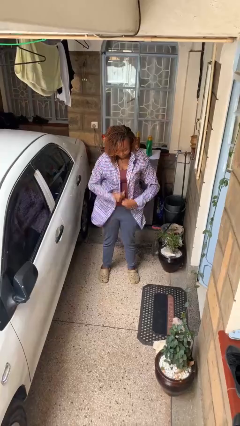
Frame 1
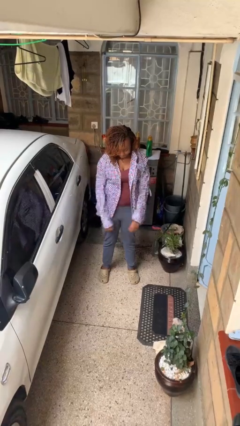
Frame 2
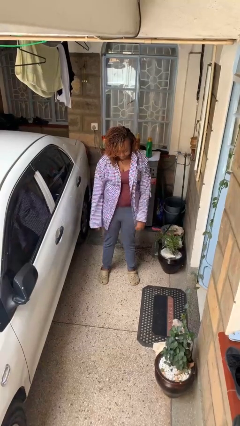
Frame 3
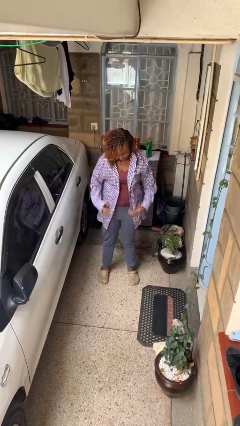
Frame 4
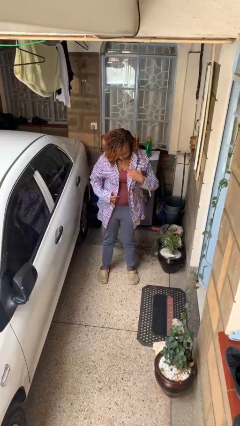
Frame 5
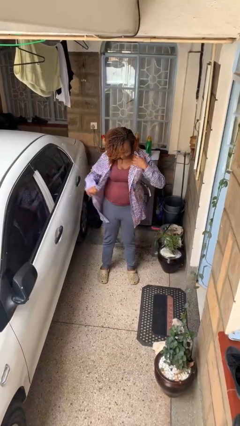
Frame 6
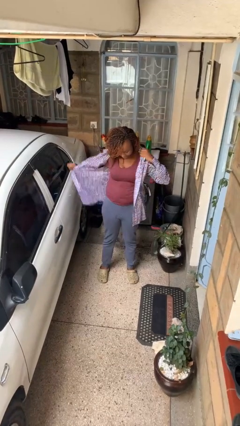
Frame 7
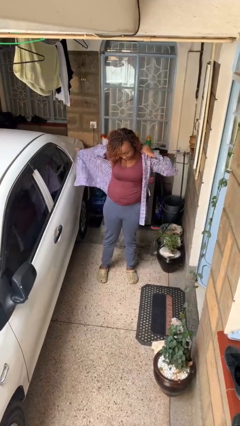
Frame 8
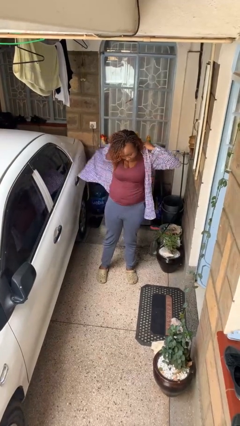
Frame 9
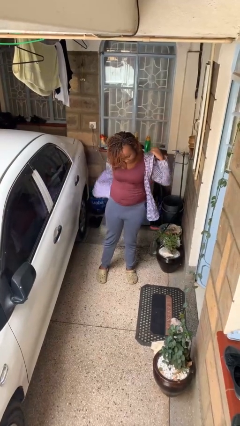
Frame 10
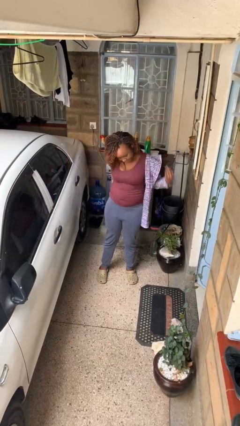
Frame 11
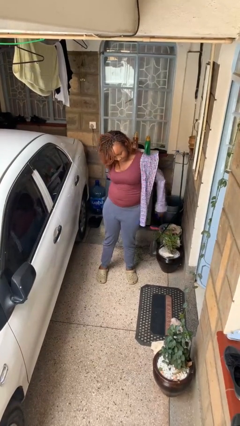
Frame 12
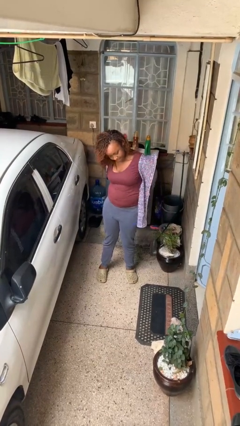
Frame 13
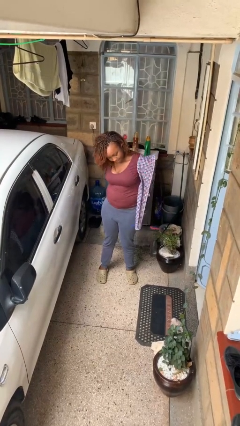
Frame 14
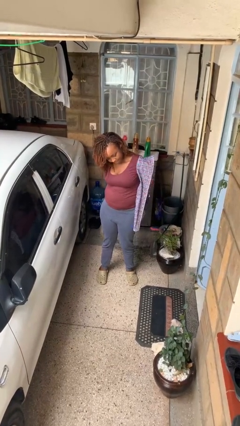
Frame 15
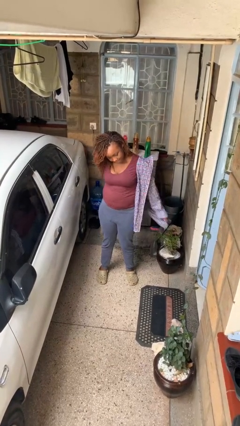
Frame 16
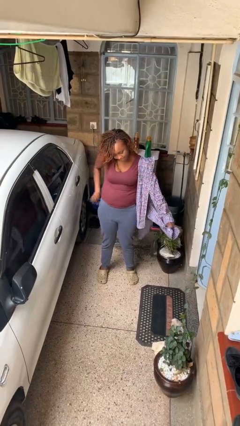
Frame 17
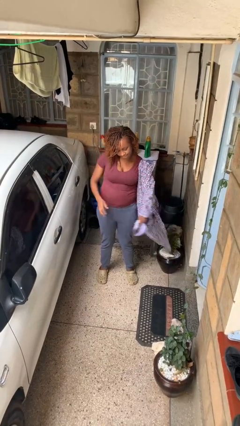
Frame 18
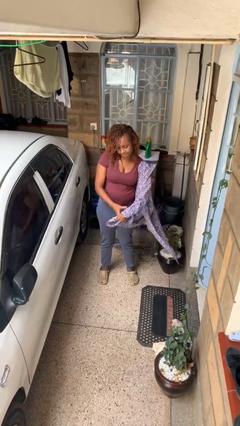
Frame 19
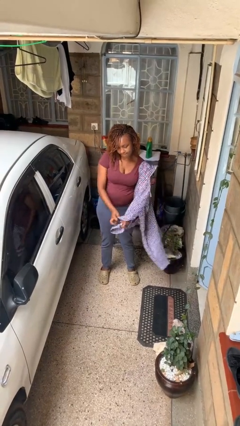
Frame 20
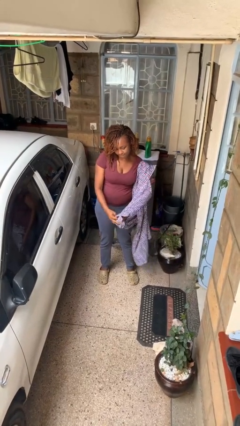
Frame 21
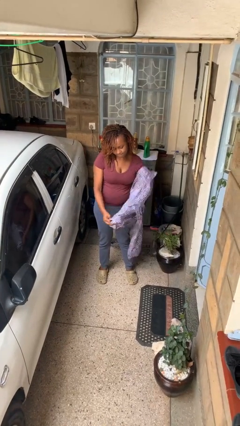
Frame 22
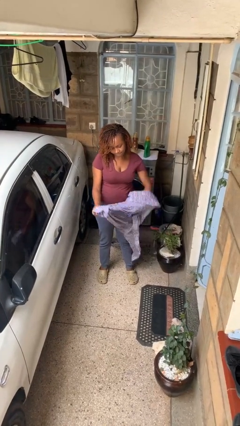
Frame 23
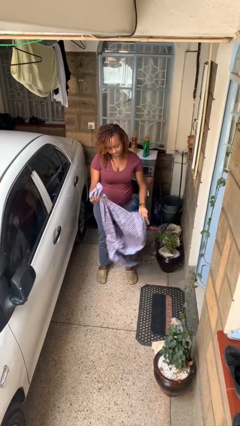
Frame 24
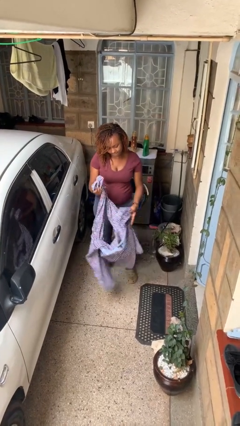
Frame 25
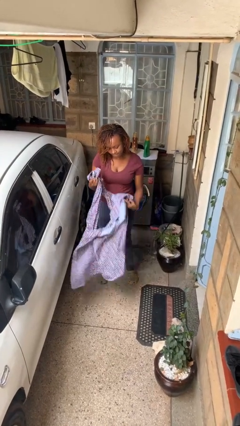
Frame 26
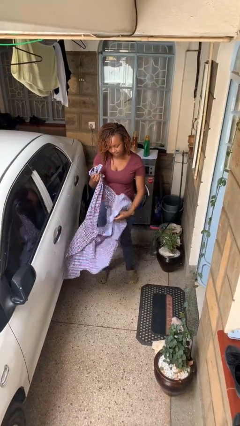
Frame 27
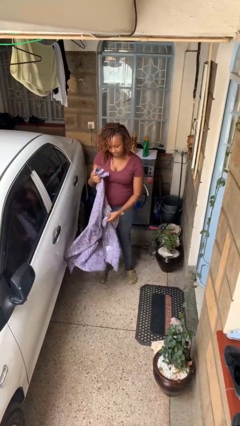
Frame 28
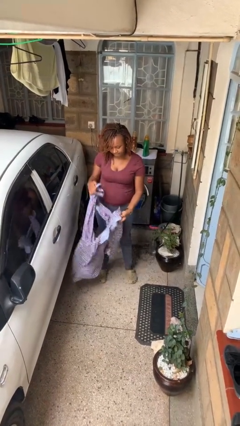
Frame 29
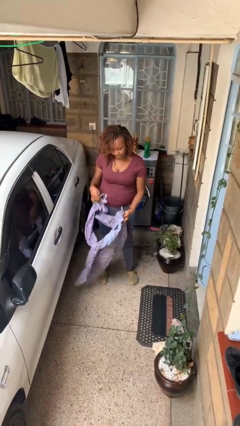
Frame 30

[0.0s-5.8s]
person takes off shirt

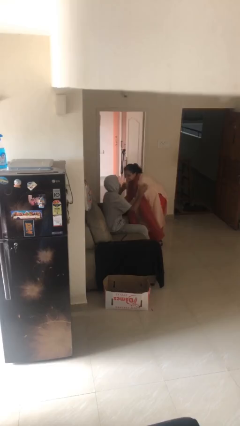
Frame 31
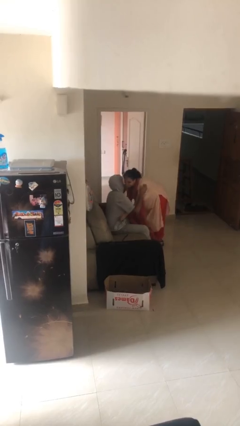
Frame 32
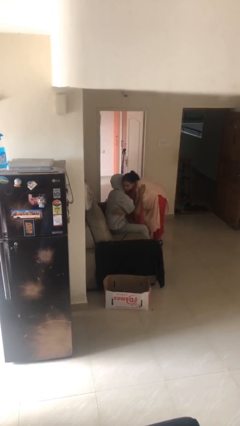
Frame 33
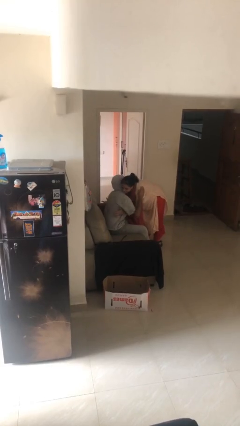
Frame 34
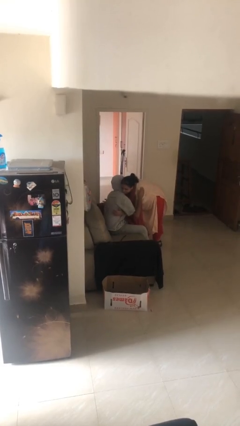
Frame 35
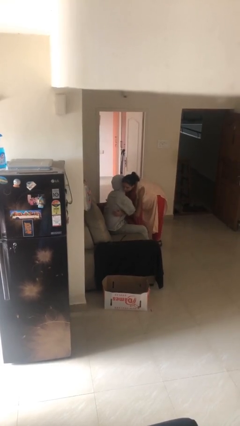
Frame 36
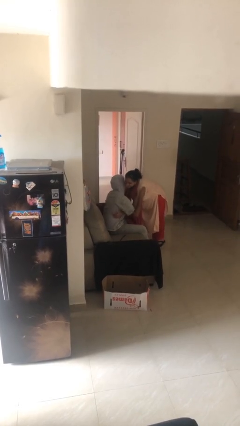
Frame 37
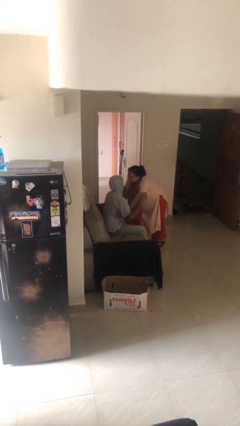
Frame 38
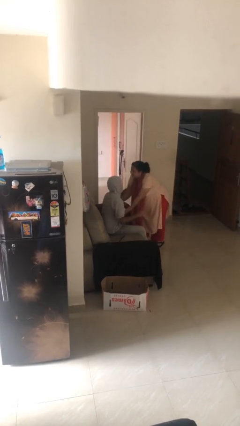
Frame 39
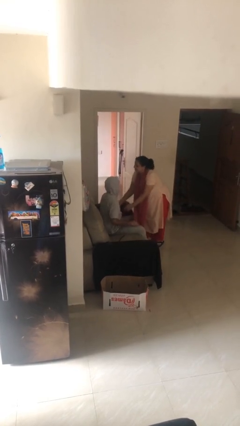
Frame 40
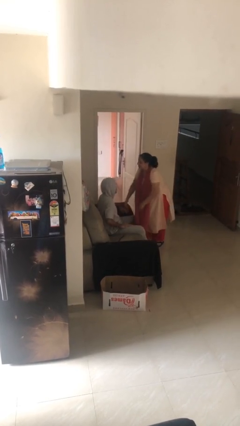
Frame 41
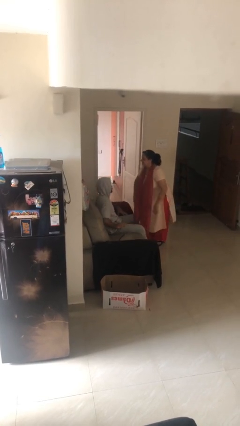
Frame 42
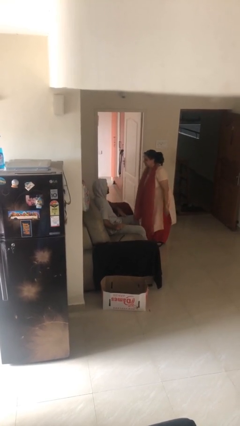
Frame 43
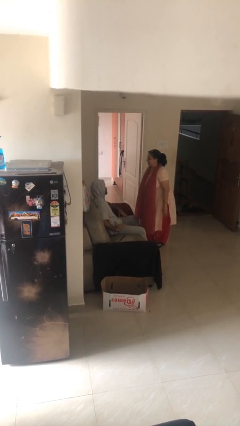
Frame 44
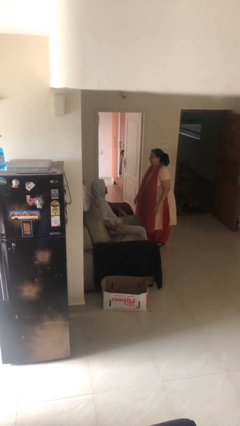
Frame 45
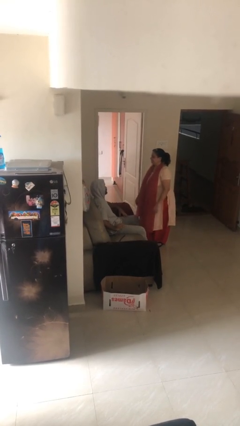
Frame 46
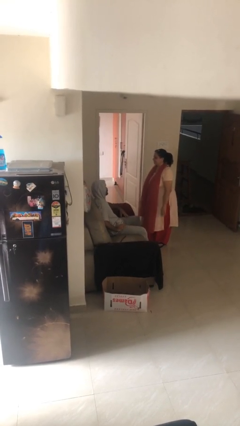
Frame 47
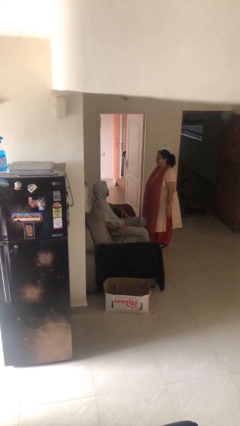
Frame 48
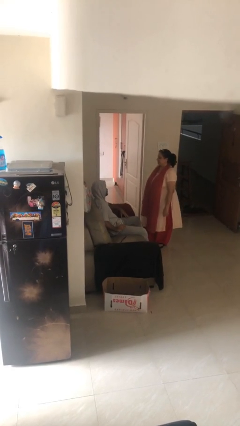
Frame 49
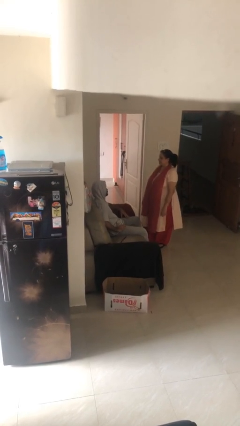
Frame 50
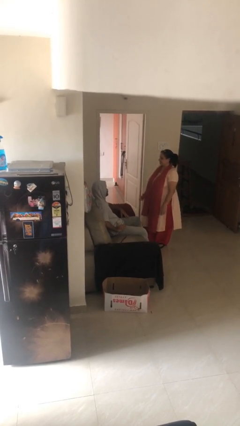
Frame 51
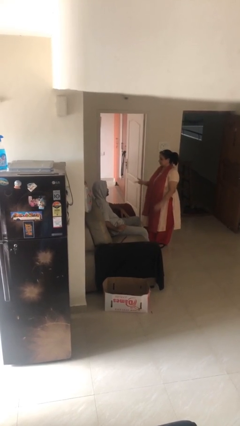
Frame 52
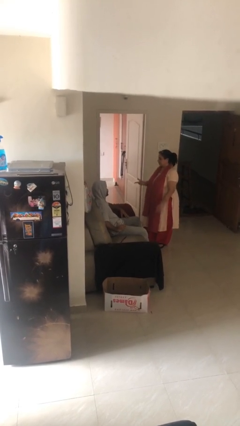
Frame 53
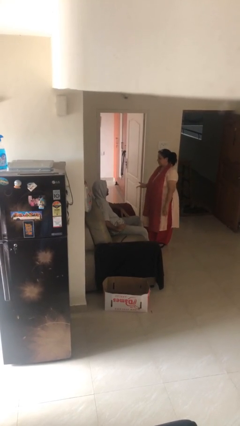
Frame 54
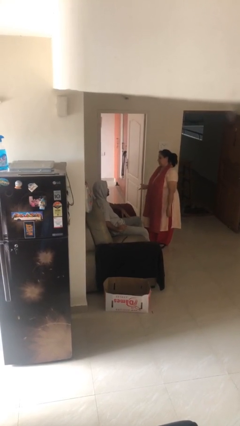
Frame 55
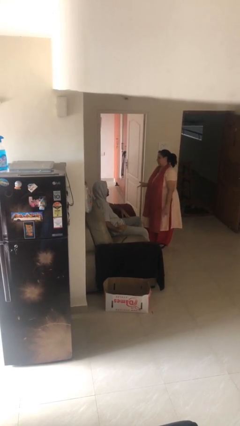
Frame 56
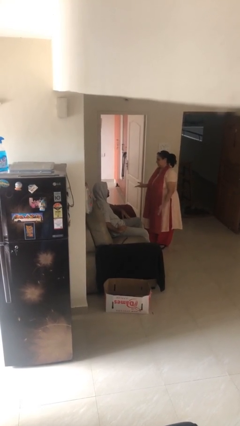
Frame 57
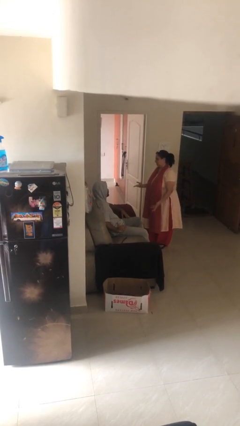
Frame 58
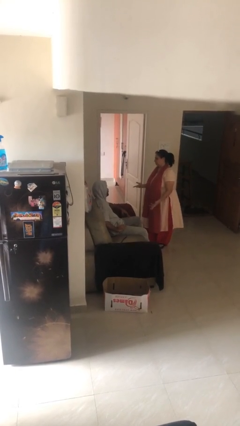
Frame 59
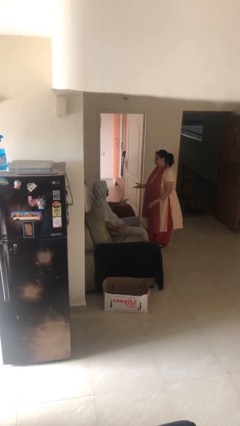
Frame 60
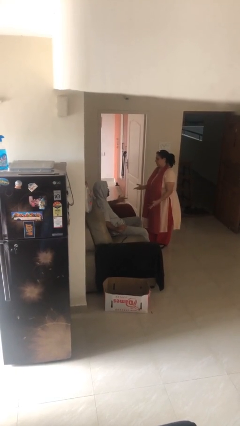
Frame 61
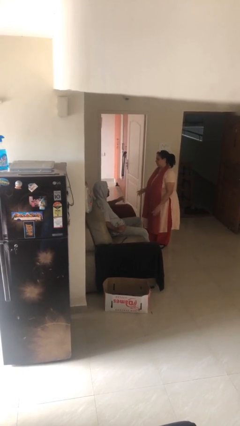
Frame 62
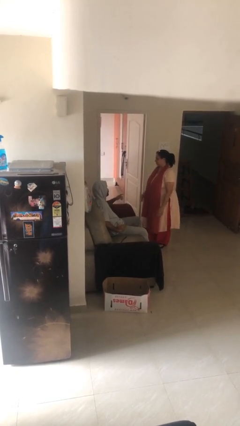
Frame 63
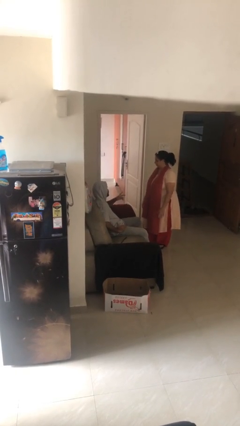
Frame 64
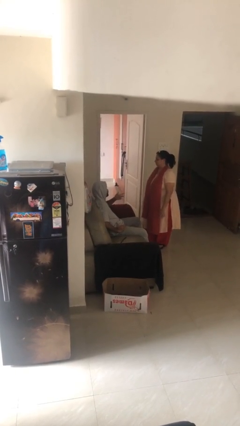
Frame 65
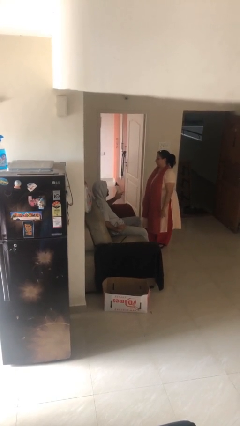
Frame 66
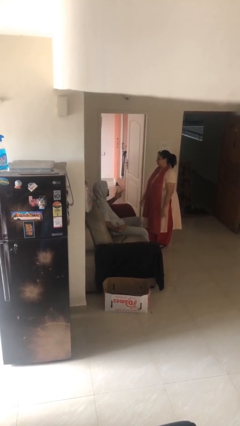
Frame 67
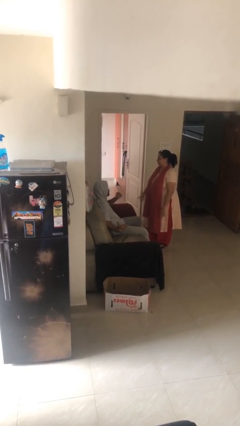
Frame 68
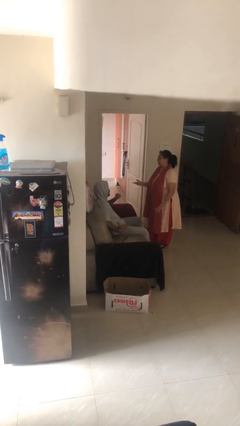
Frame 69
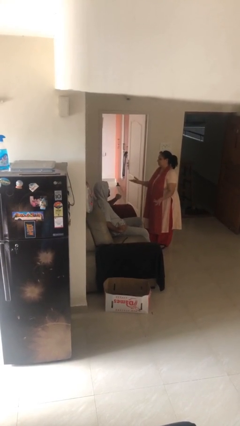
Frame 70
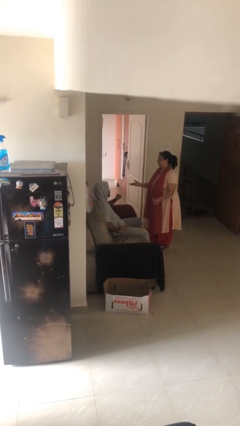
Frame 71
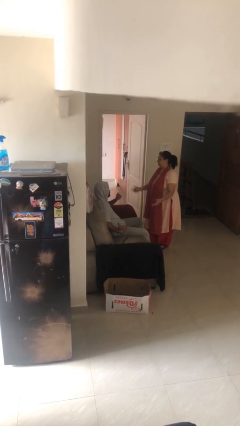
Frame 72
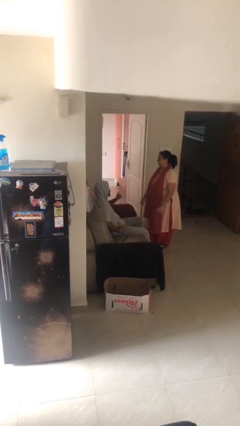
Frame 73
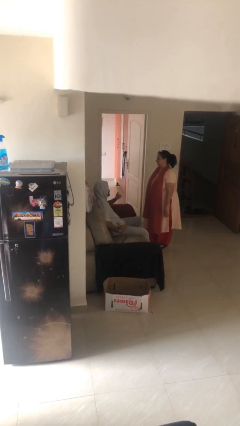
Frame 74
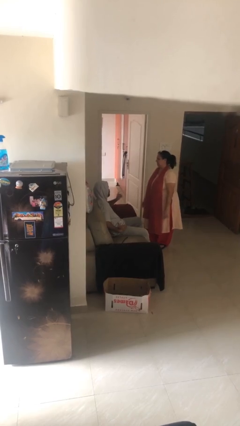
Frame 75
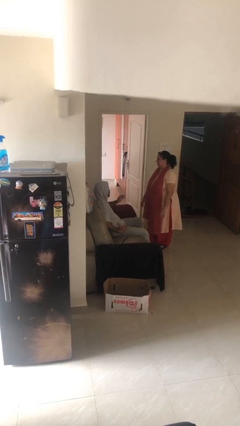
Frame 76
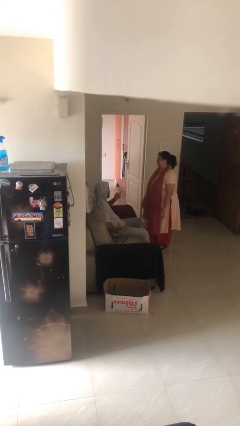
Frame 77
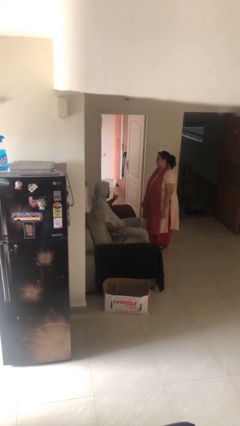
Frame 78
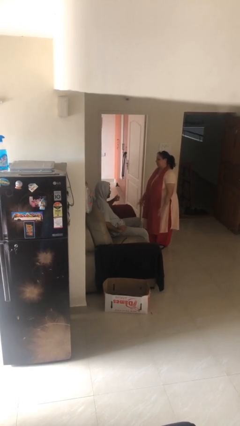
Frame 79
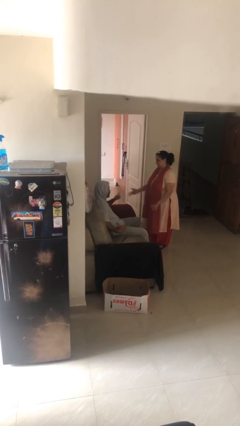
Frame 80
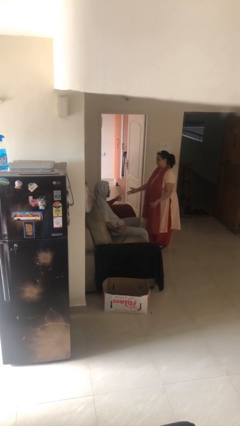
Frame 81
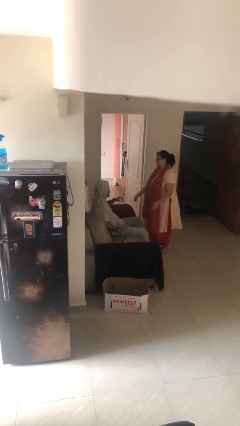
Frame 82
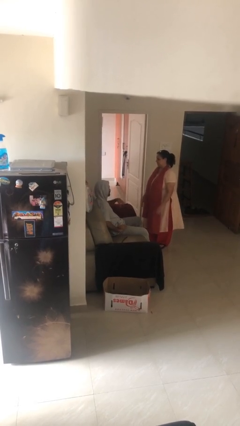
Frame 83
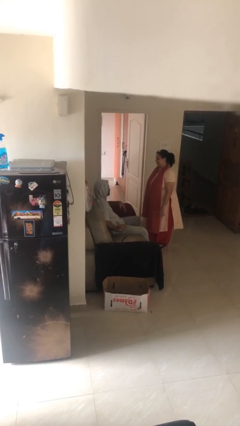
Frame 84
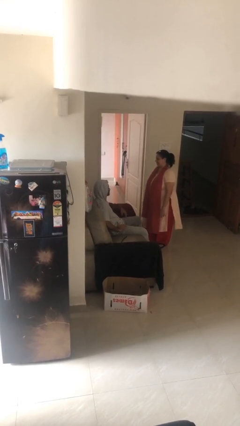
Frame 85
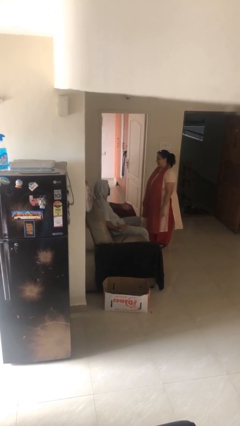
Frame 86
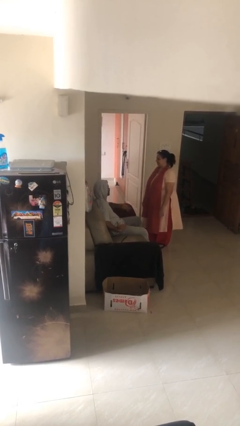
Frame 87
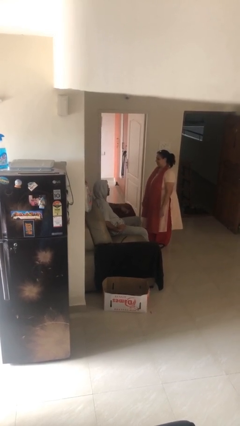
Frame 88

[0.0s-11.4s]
person embraces person

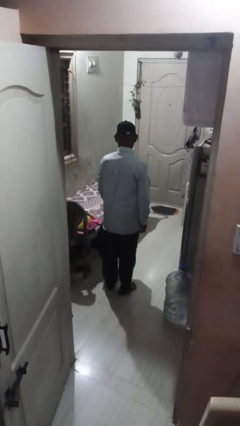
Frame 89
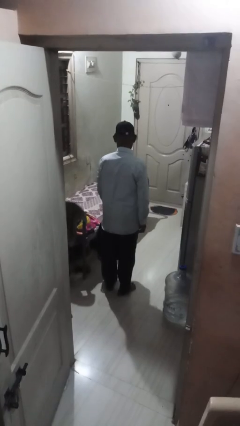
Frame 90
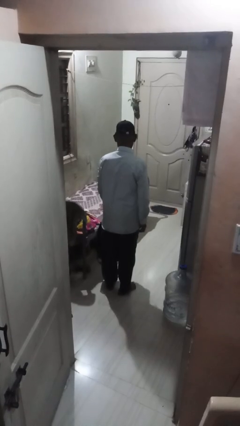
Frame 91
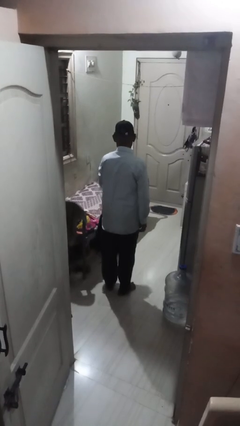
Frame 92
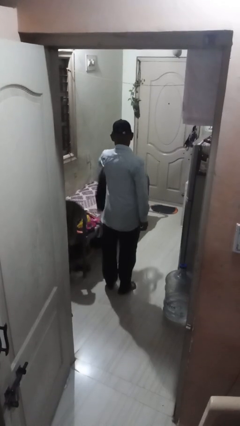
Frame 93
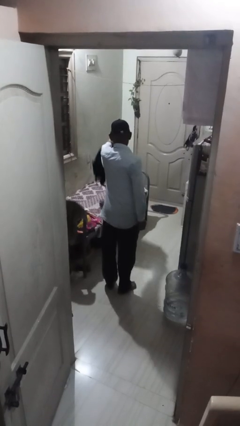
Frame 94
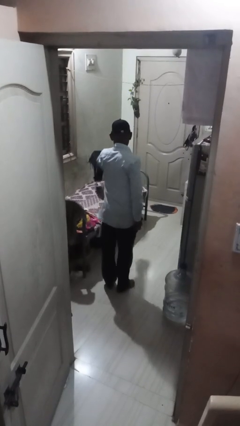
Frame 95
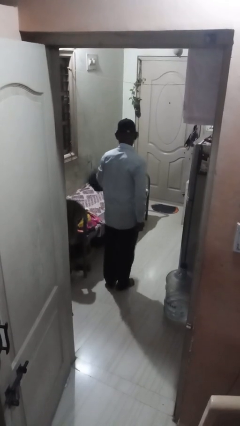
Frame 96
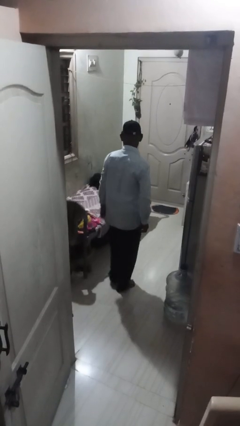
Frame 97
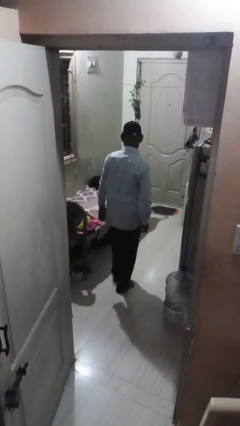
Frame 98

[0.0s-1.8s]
person throws object on bed
